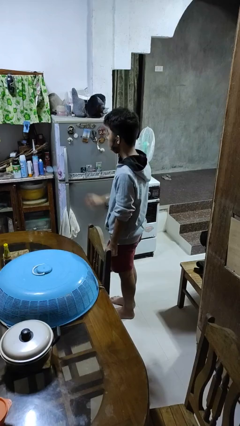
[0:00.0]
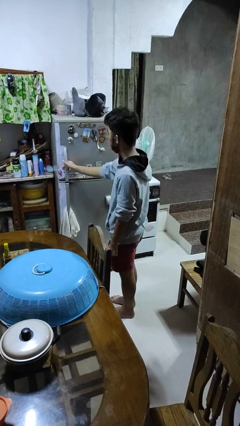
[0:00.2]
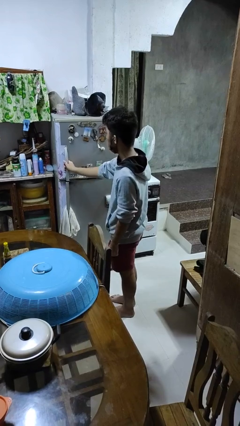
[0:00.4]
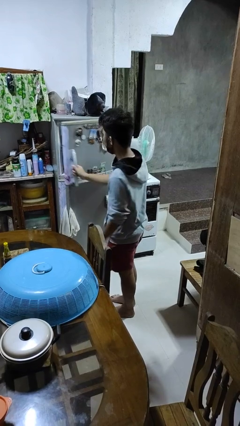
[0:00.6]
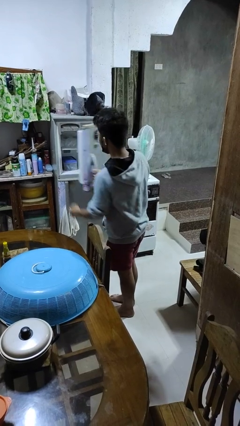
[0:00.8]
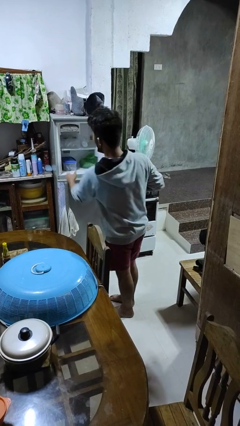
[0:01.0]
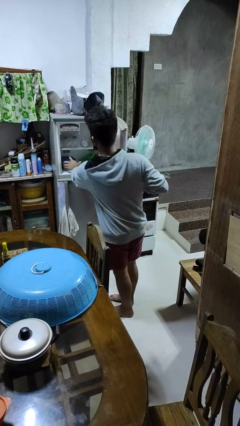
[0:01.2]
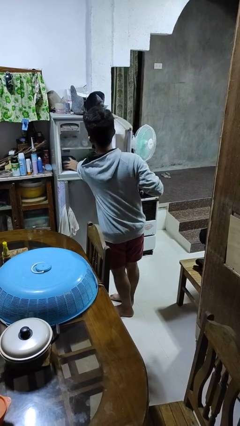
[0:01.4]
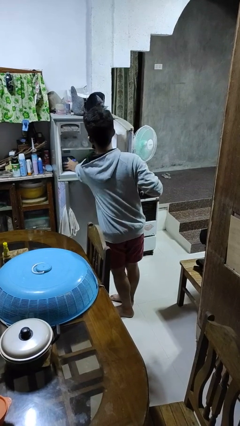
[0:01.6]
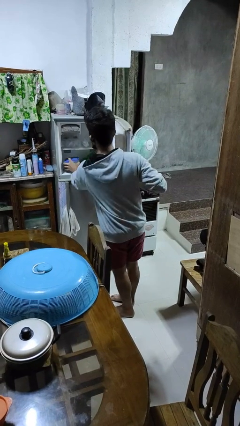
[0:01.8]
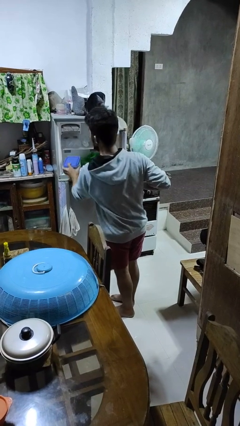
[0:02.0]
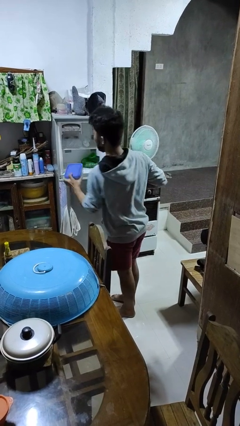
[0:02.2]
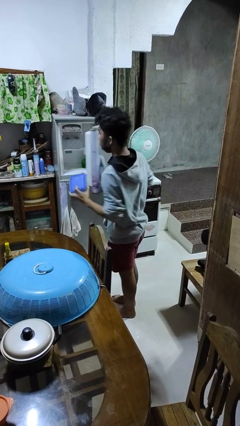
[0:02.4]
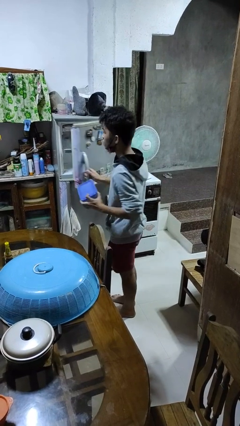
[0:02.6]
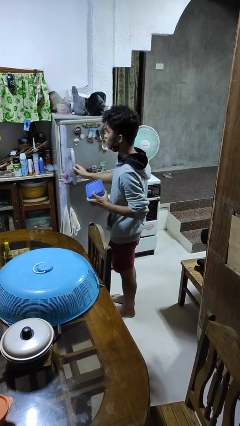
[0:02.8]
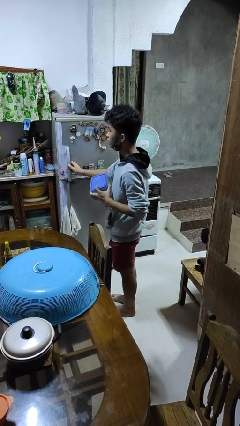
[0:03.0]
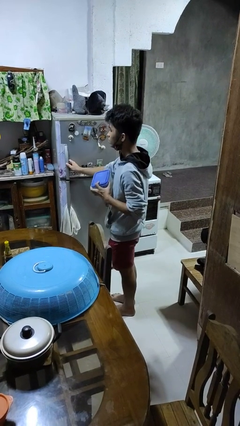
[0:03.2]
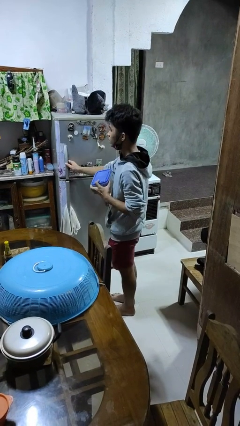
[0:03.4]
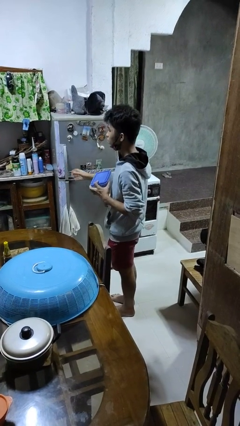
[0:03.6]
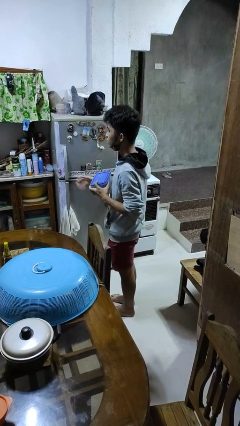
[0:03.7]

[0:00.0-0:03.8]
person takes object from refrigerator

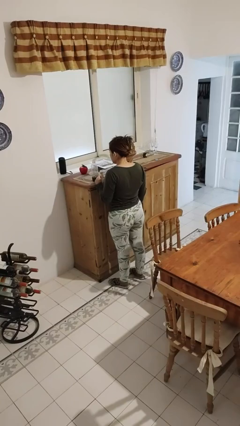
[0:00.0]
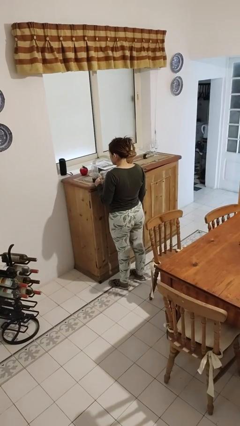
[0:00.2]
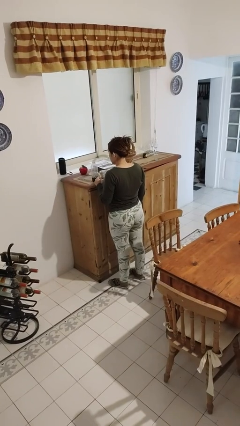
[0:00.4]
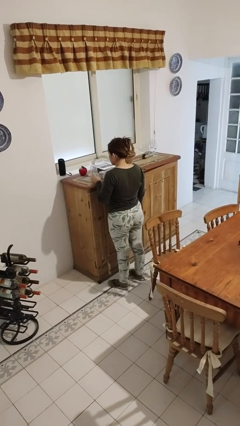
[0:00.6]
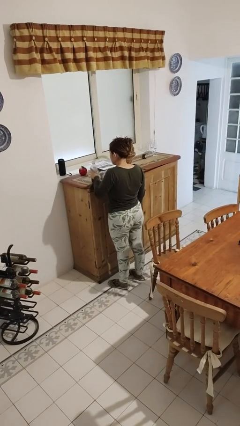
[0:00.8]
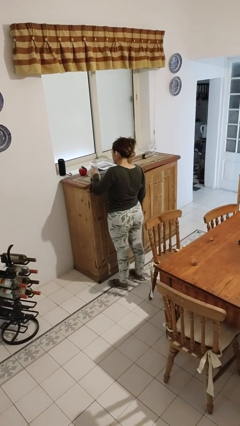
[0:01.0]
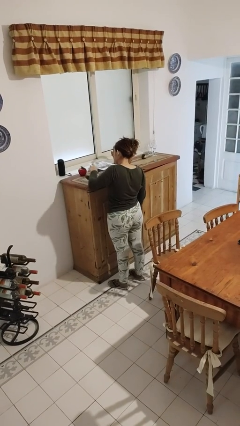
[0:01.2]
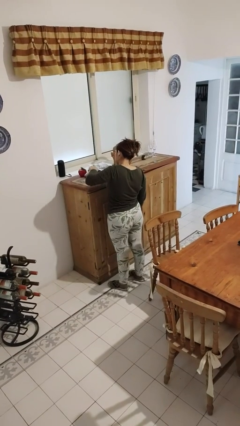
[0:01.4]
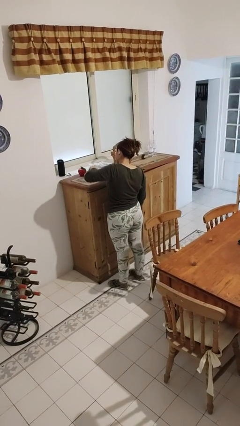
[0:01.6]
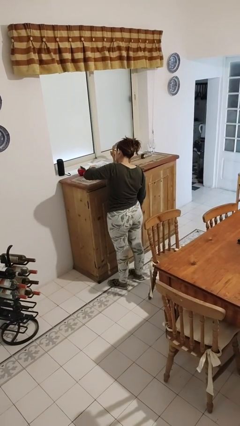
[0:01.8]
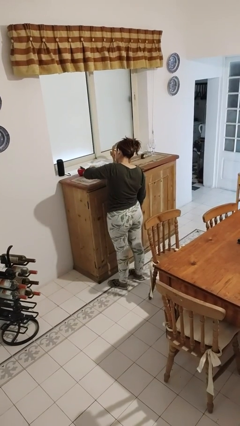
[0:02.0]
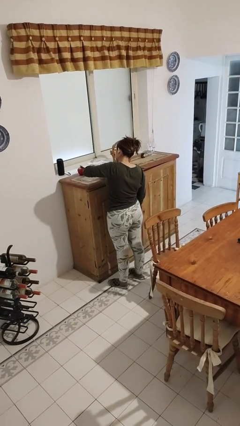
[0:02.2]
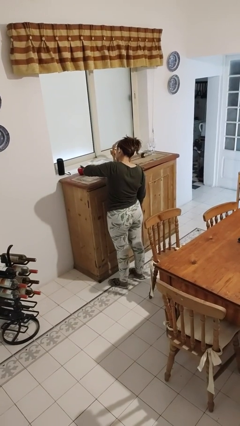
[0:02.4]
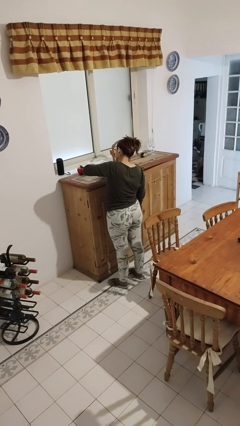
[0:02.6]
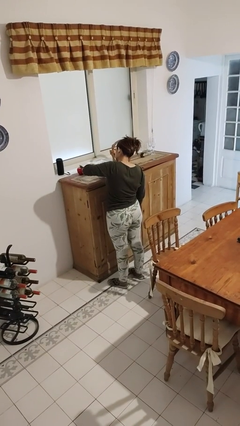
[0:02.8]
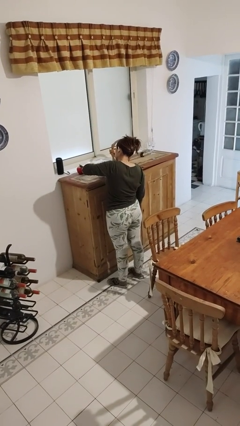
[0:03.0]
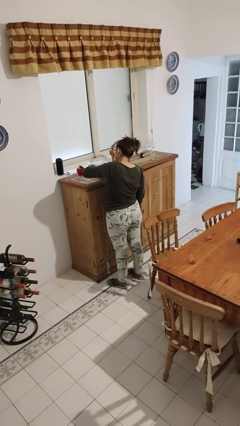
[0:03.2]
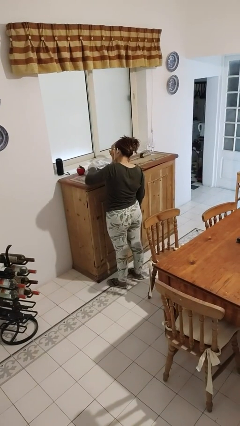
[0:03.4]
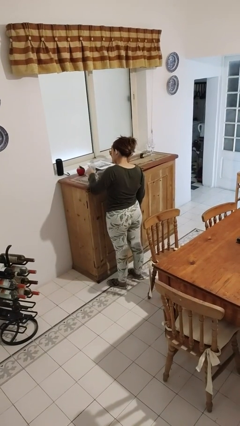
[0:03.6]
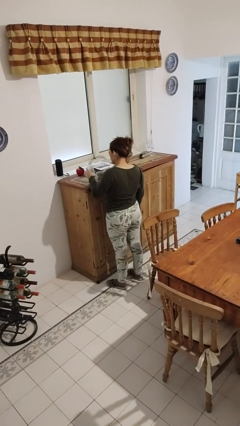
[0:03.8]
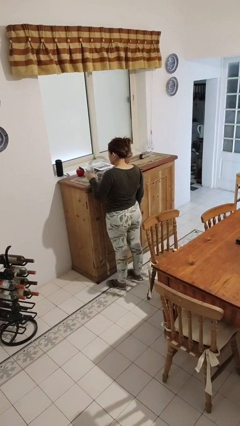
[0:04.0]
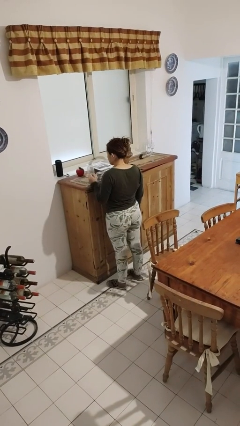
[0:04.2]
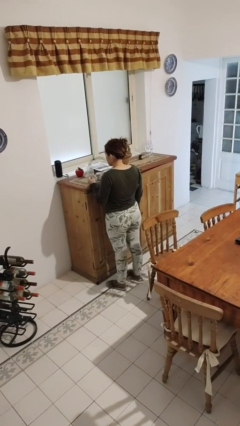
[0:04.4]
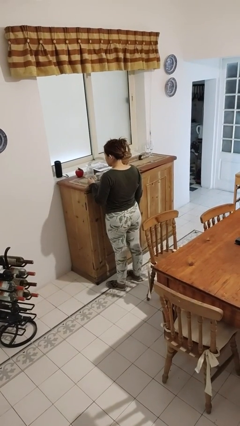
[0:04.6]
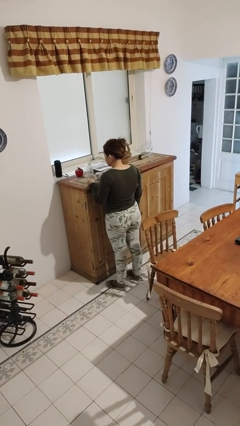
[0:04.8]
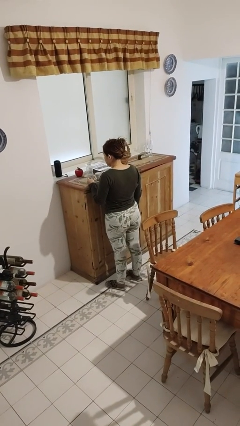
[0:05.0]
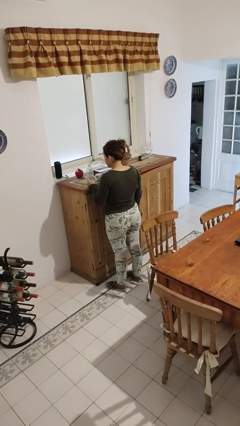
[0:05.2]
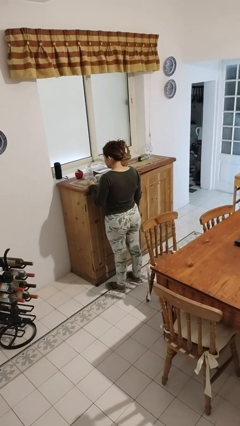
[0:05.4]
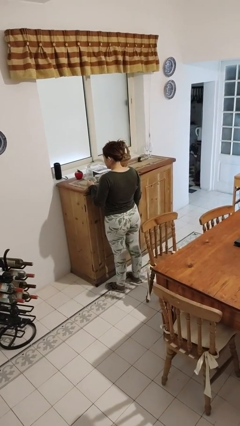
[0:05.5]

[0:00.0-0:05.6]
person pours liquid into cup

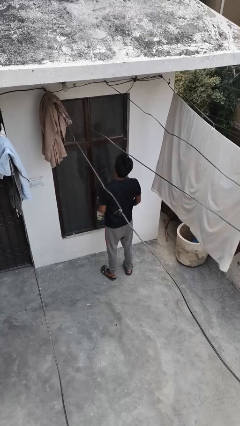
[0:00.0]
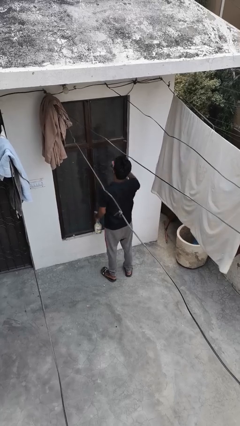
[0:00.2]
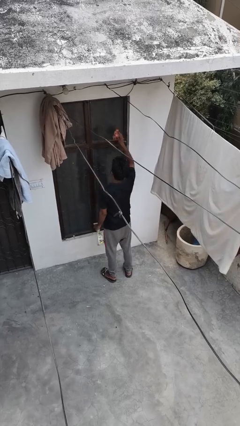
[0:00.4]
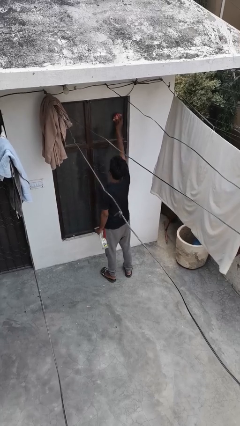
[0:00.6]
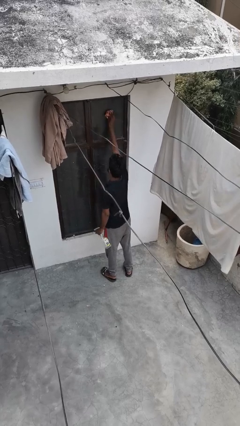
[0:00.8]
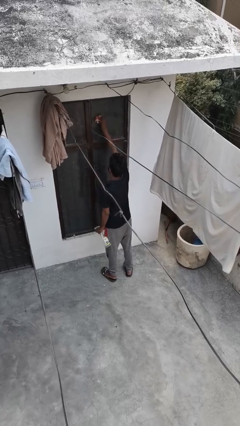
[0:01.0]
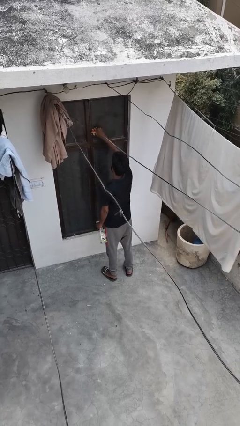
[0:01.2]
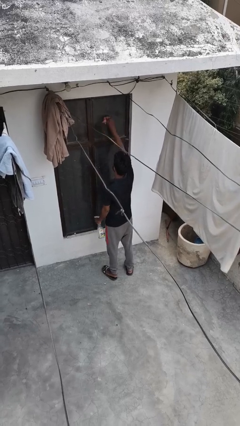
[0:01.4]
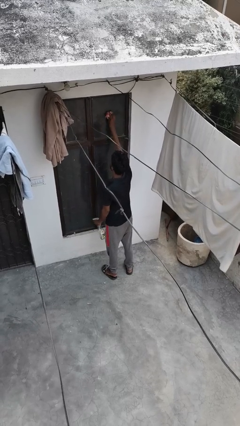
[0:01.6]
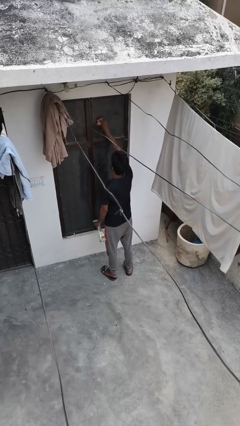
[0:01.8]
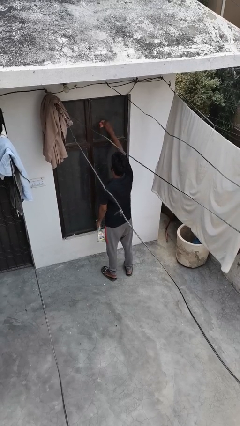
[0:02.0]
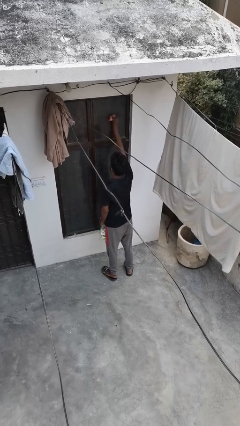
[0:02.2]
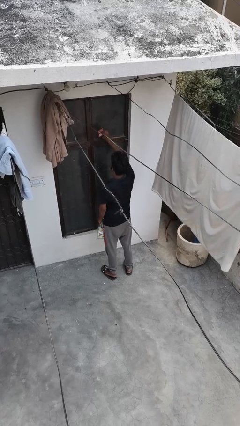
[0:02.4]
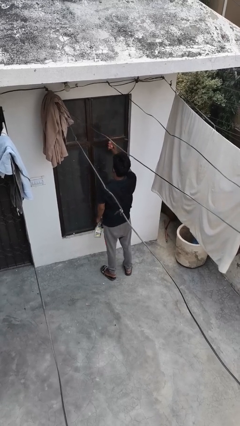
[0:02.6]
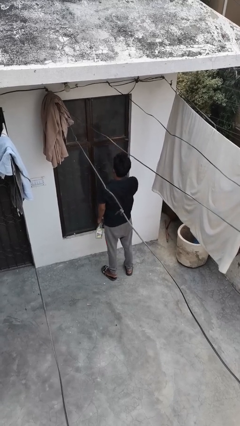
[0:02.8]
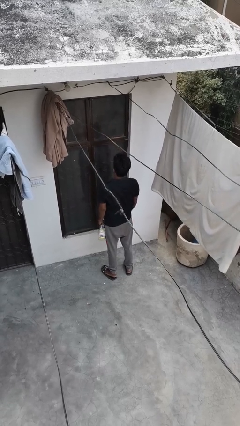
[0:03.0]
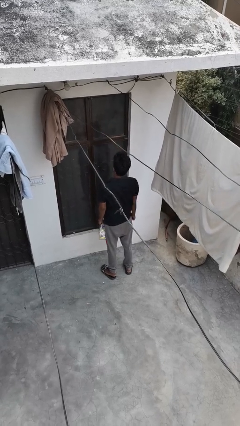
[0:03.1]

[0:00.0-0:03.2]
person washes window

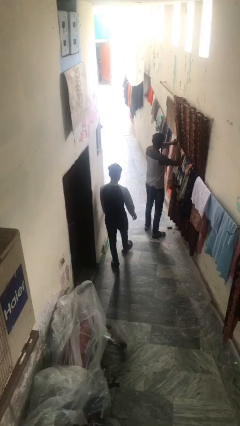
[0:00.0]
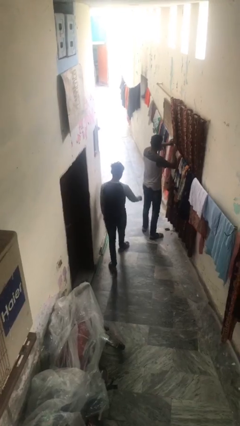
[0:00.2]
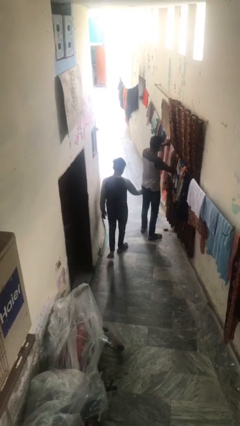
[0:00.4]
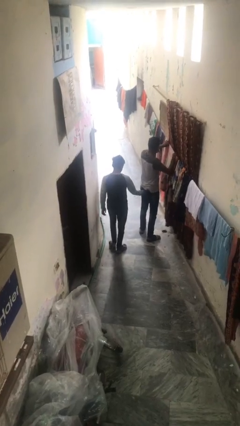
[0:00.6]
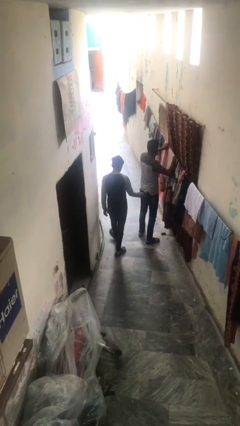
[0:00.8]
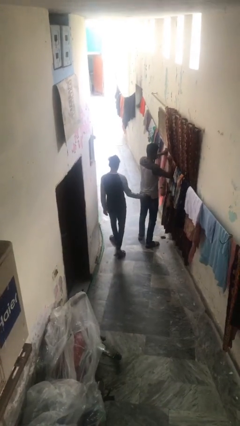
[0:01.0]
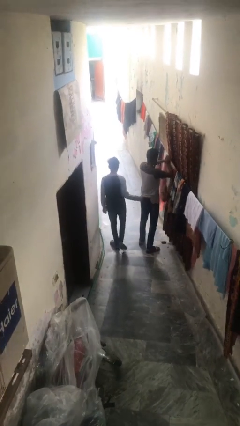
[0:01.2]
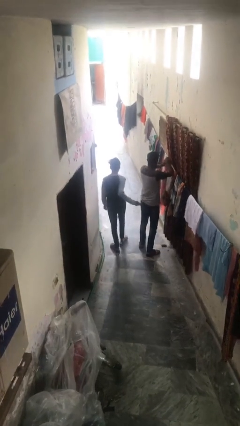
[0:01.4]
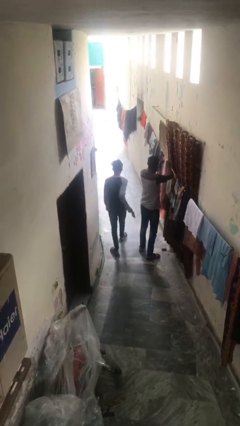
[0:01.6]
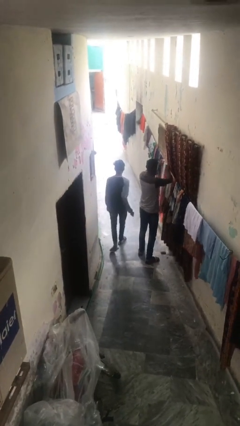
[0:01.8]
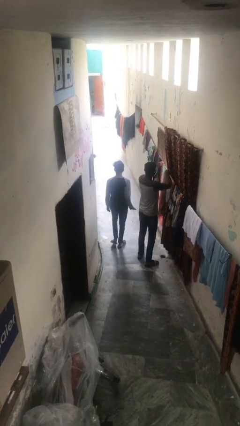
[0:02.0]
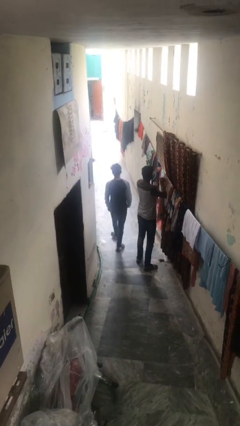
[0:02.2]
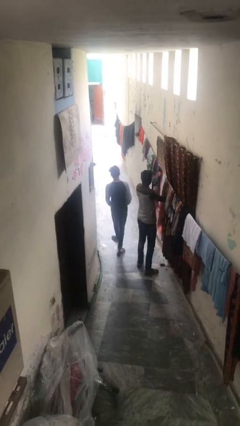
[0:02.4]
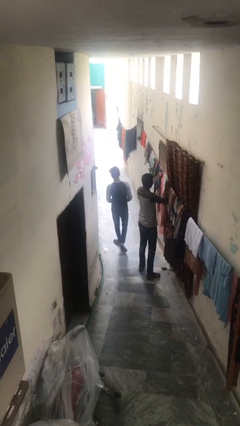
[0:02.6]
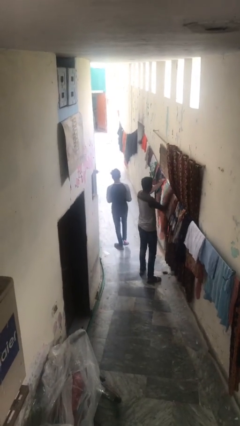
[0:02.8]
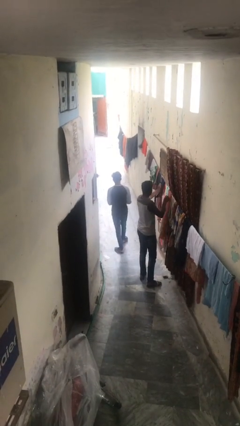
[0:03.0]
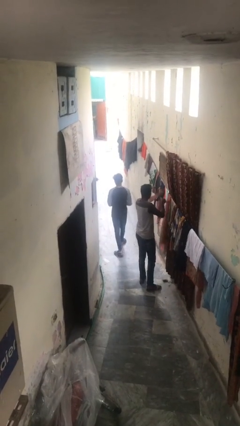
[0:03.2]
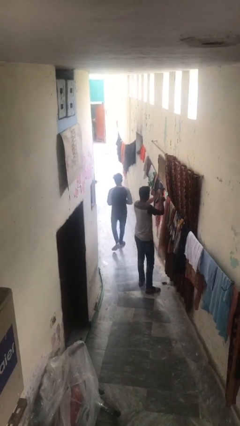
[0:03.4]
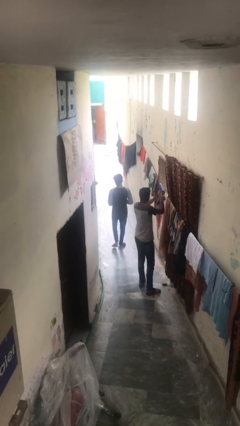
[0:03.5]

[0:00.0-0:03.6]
person steals object from person

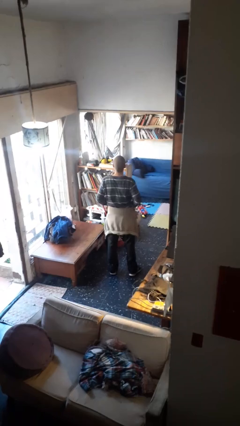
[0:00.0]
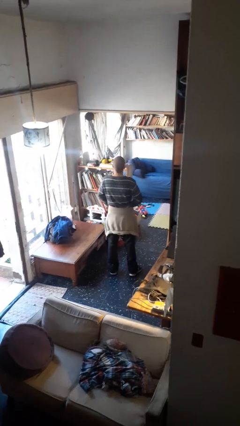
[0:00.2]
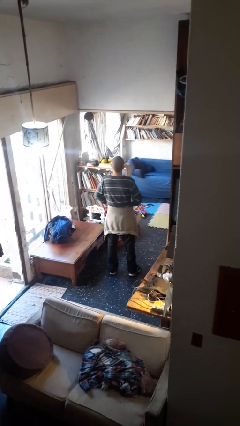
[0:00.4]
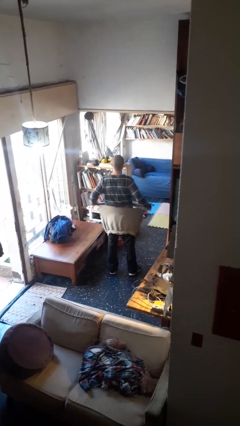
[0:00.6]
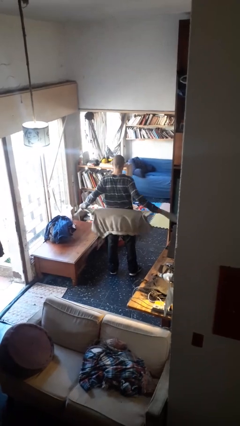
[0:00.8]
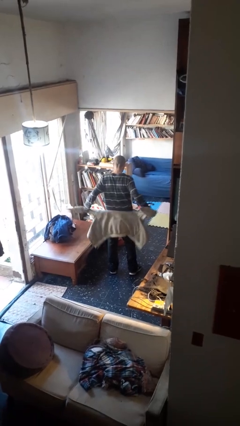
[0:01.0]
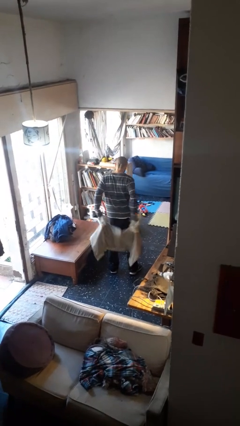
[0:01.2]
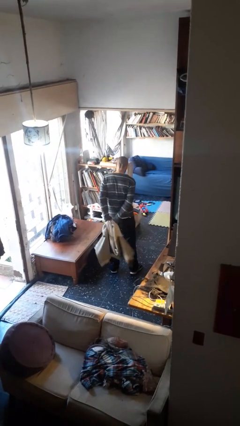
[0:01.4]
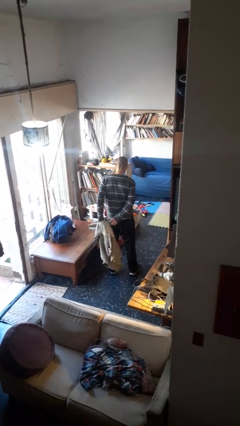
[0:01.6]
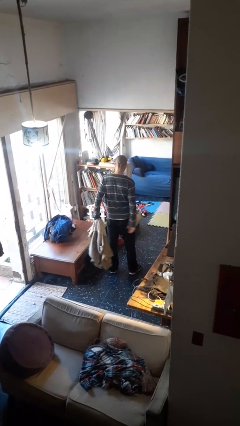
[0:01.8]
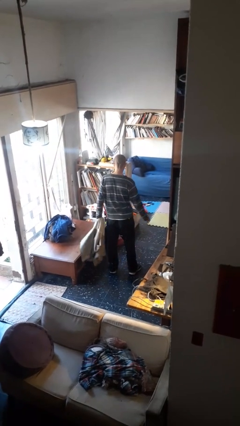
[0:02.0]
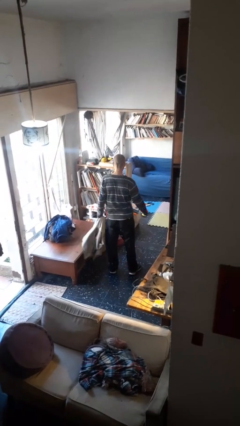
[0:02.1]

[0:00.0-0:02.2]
person unties jacket around waist
